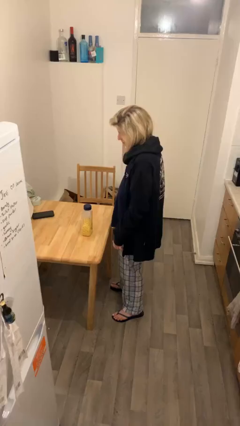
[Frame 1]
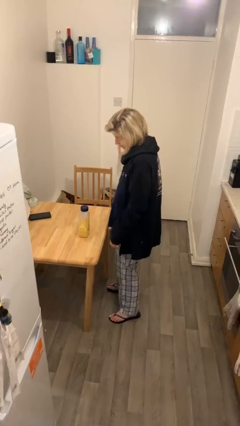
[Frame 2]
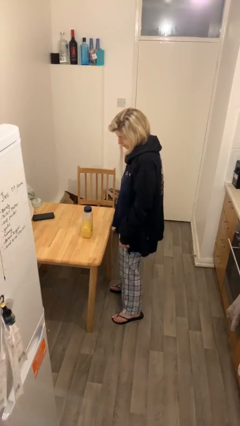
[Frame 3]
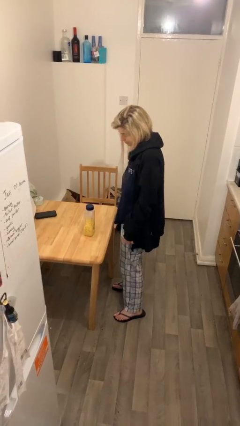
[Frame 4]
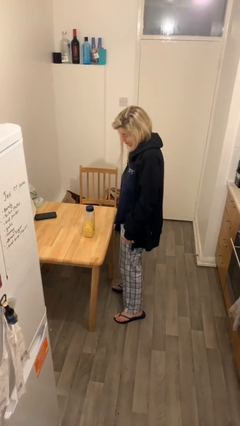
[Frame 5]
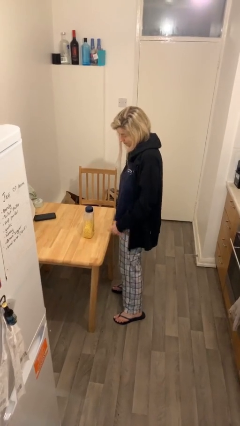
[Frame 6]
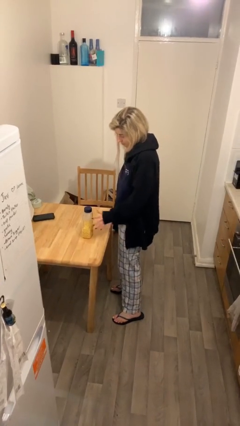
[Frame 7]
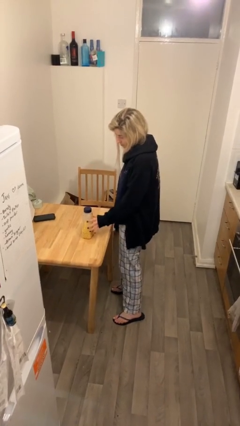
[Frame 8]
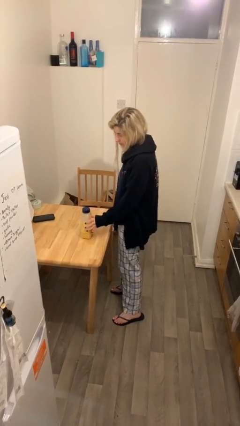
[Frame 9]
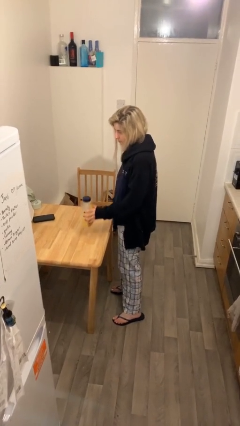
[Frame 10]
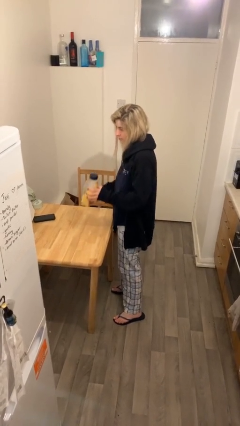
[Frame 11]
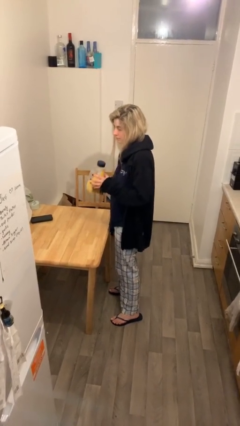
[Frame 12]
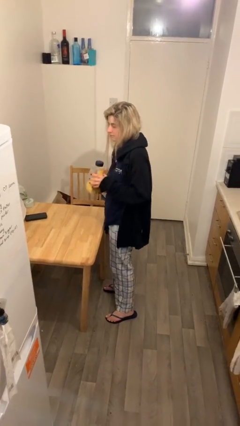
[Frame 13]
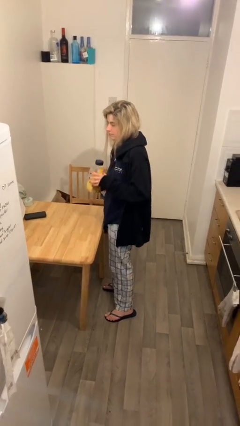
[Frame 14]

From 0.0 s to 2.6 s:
person picks up object from table

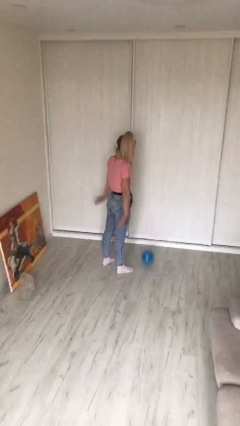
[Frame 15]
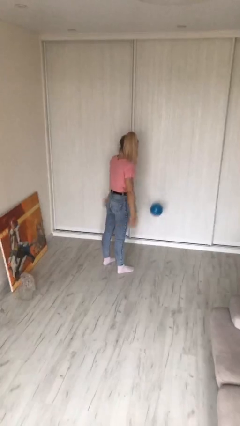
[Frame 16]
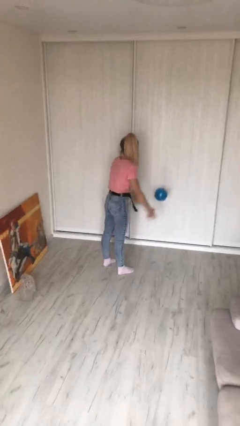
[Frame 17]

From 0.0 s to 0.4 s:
person bounces ball on floor

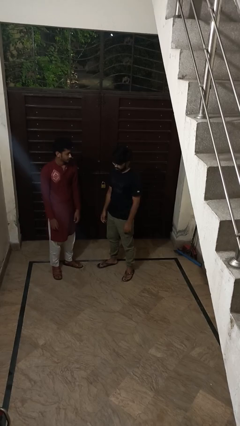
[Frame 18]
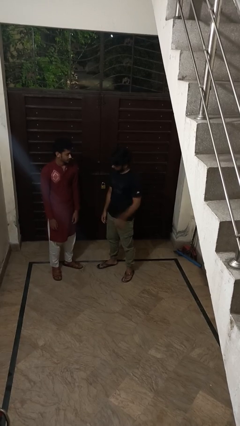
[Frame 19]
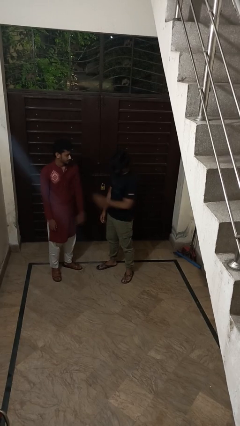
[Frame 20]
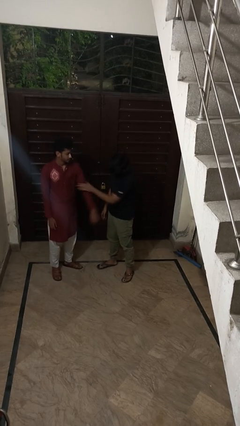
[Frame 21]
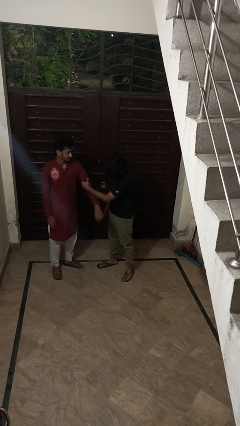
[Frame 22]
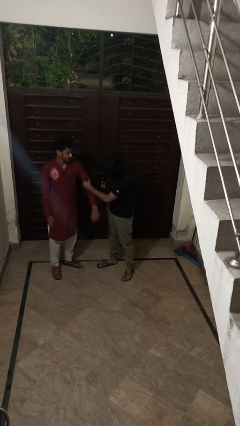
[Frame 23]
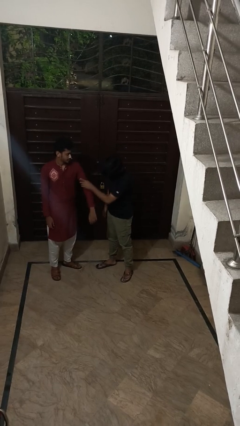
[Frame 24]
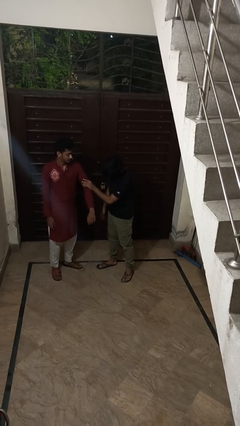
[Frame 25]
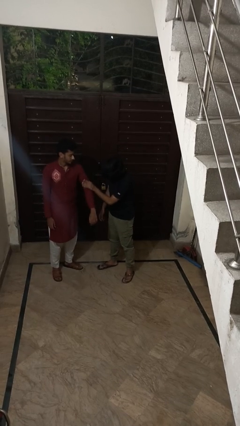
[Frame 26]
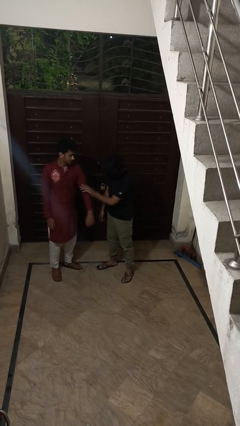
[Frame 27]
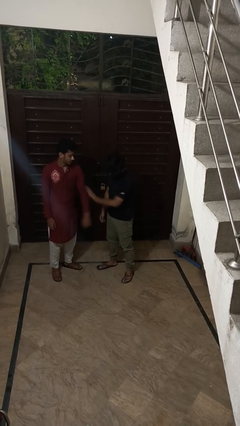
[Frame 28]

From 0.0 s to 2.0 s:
person grabs person by bicep

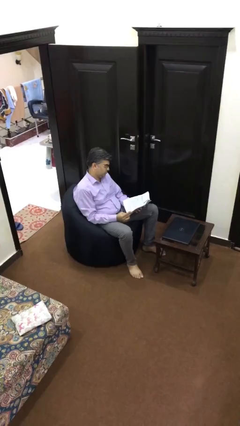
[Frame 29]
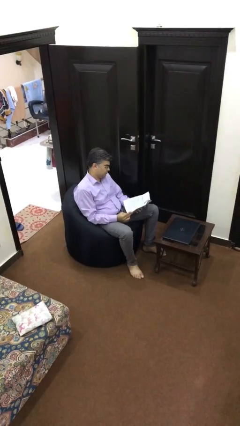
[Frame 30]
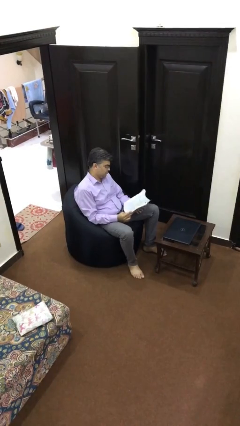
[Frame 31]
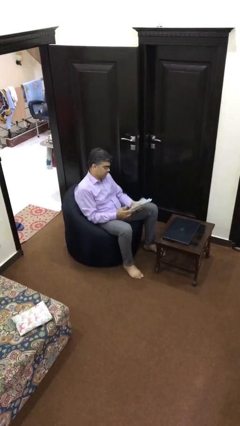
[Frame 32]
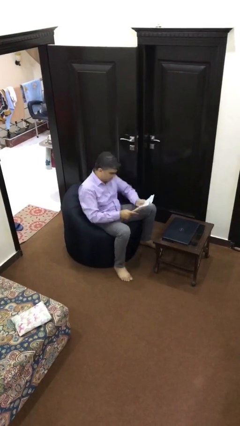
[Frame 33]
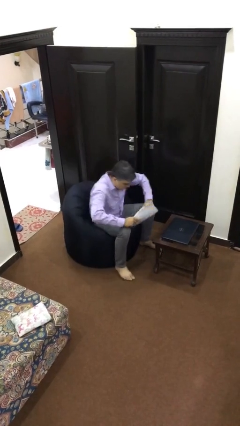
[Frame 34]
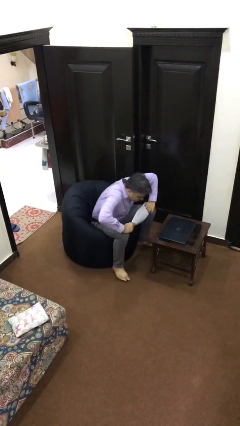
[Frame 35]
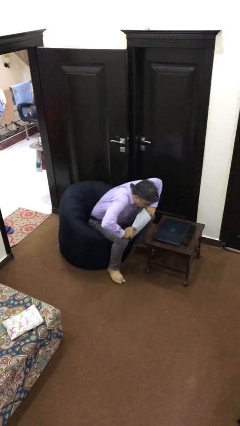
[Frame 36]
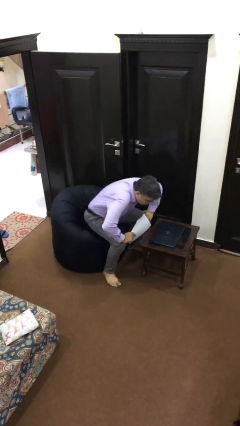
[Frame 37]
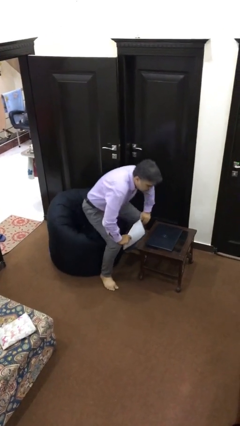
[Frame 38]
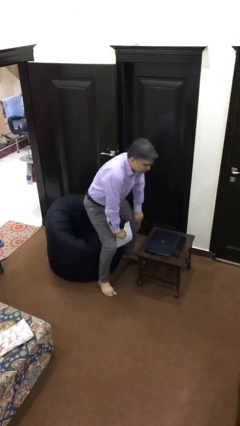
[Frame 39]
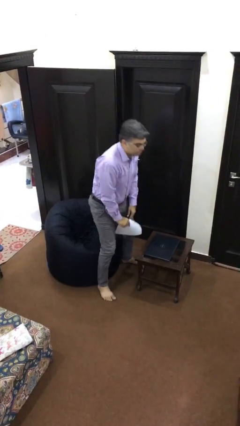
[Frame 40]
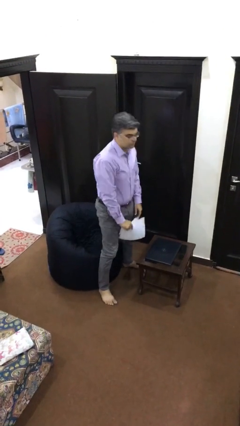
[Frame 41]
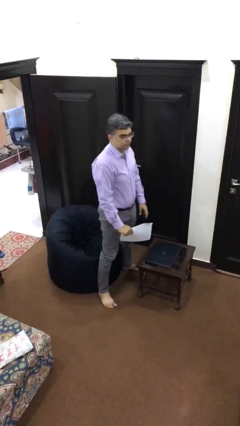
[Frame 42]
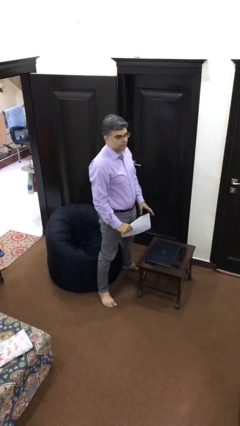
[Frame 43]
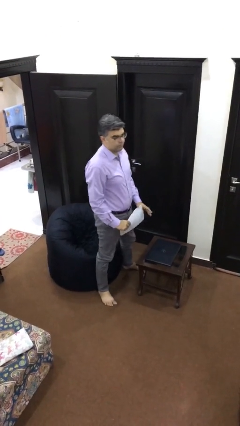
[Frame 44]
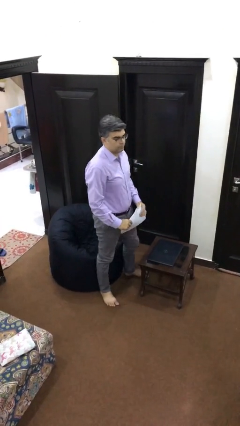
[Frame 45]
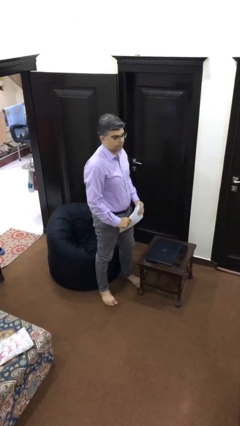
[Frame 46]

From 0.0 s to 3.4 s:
person stands up

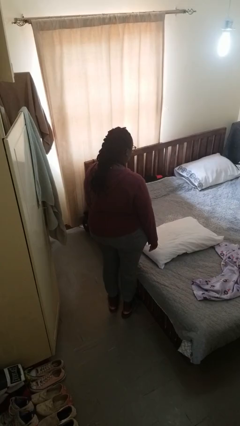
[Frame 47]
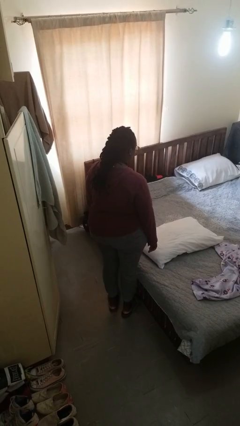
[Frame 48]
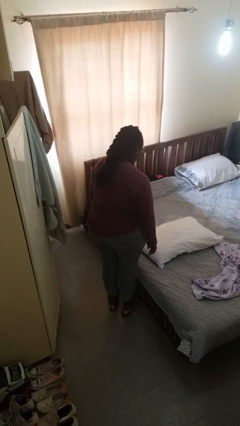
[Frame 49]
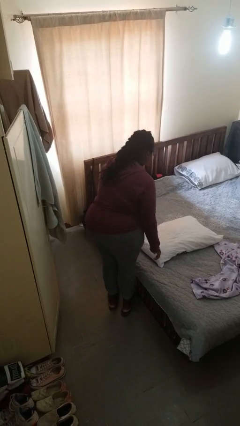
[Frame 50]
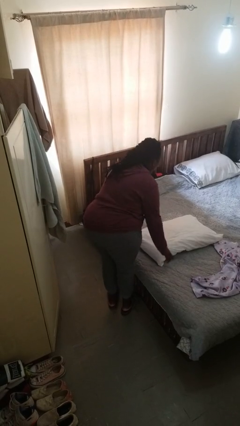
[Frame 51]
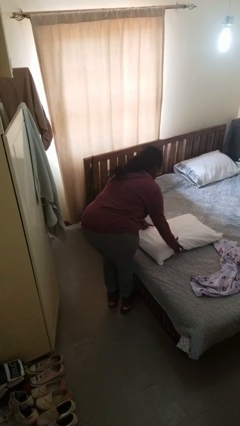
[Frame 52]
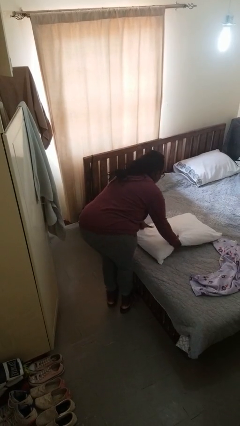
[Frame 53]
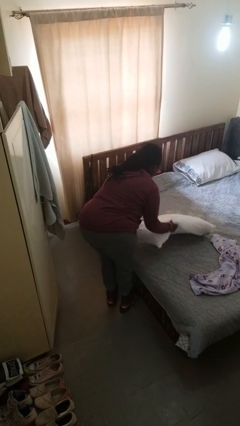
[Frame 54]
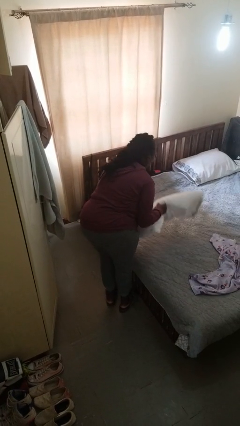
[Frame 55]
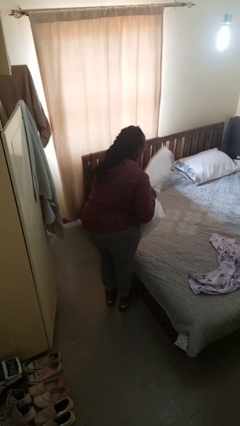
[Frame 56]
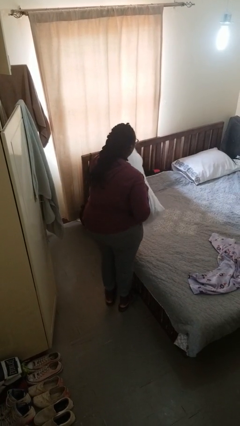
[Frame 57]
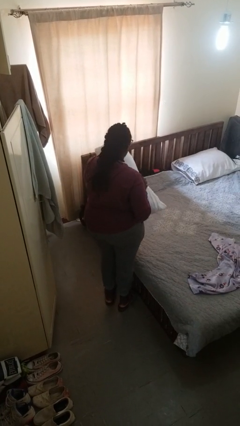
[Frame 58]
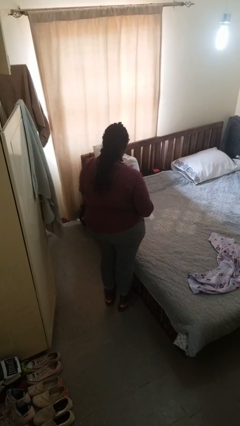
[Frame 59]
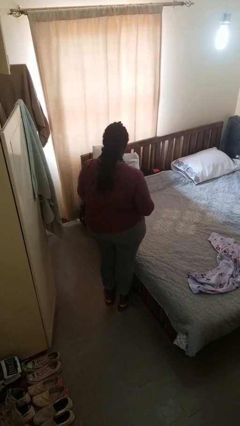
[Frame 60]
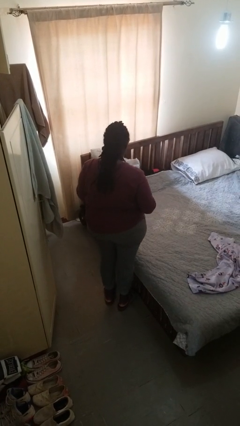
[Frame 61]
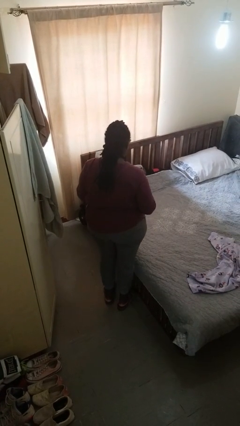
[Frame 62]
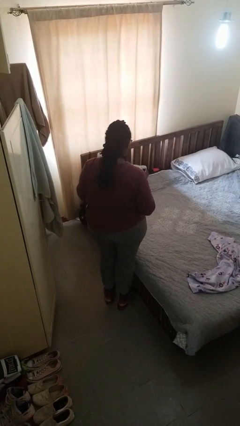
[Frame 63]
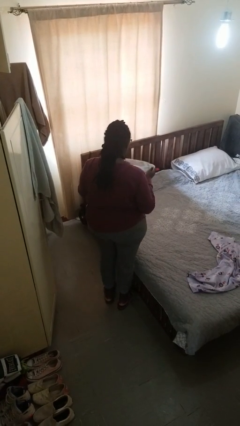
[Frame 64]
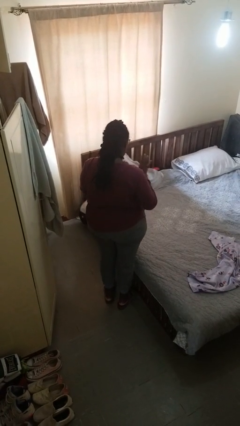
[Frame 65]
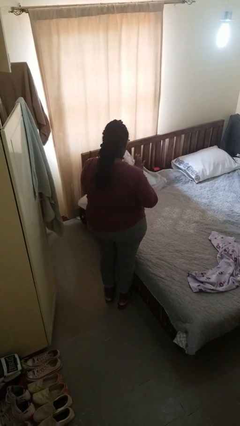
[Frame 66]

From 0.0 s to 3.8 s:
person picks up object from bed

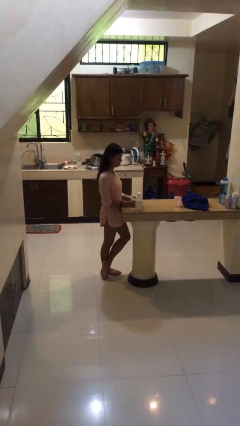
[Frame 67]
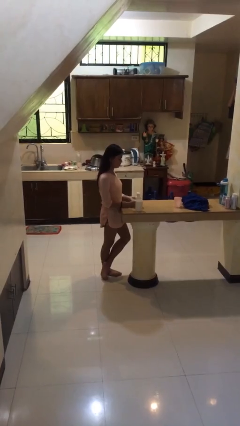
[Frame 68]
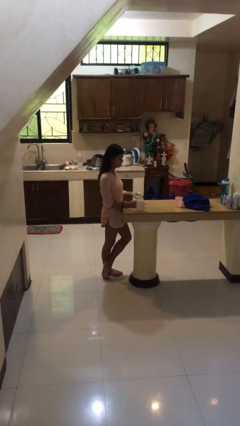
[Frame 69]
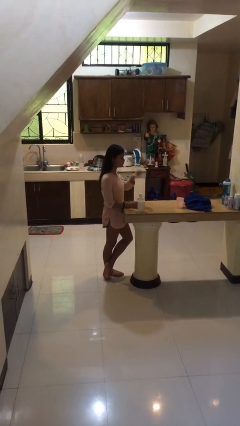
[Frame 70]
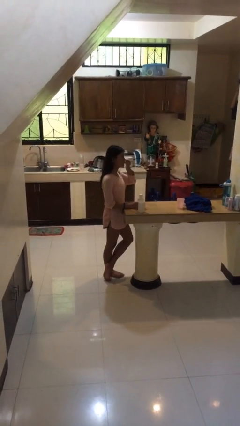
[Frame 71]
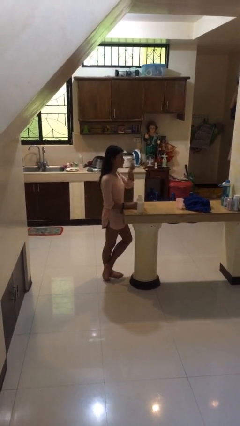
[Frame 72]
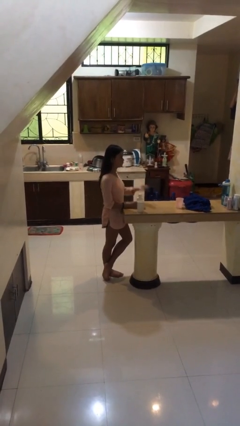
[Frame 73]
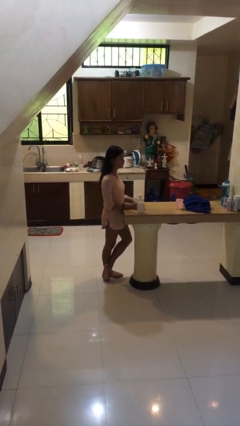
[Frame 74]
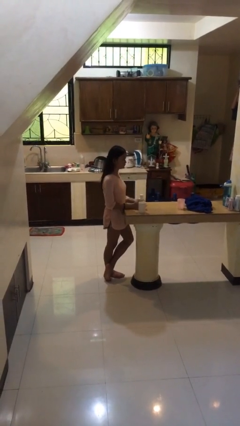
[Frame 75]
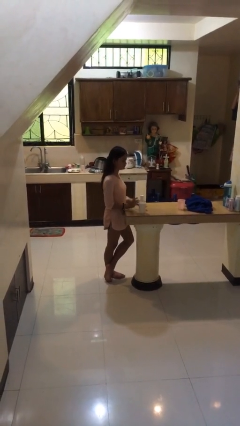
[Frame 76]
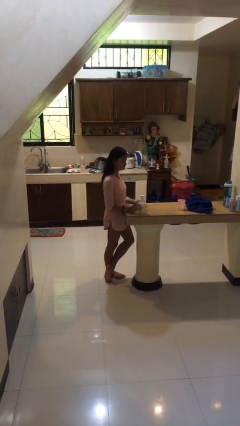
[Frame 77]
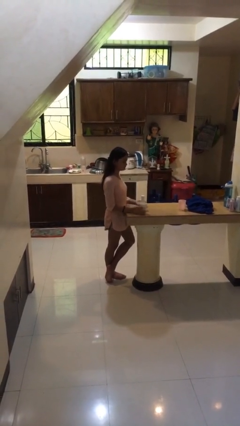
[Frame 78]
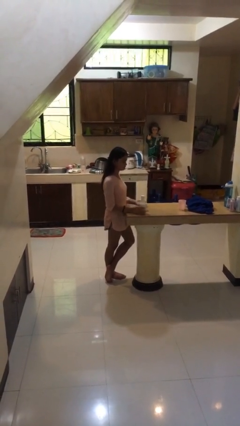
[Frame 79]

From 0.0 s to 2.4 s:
person takes medicine pills

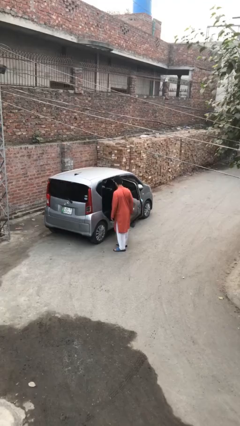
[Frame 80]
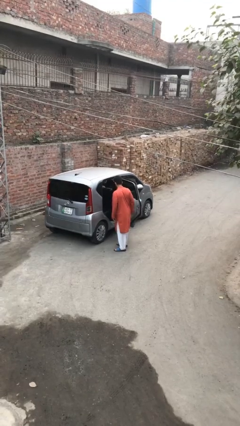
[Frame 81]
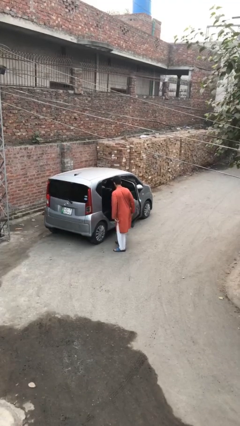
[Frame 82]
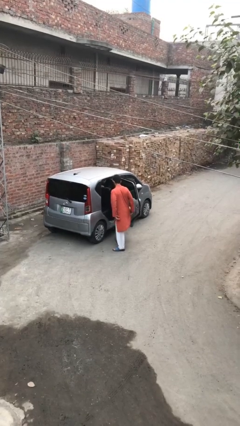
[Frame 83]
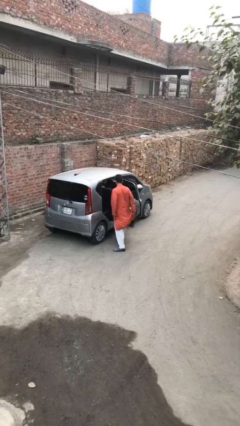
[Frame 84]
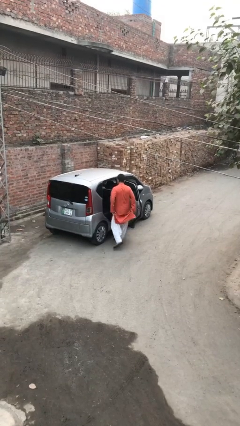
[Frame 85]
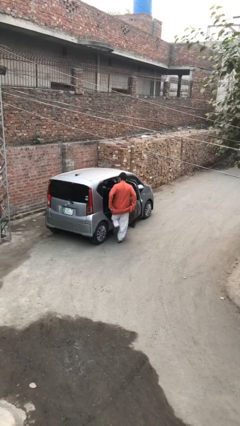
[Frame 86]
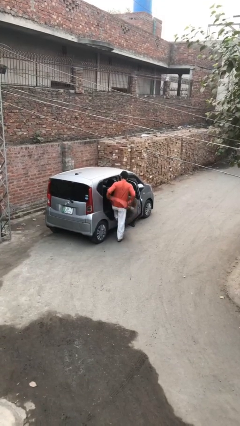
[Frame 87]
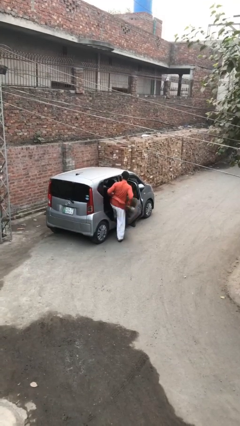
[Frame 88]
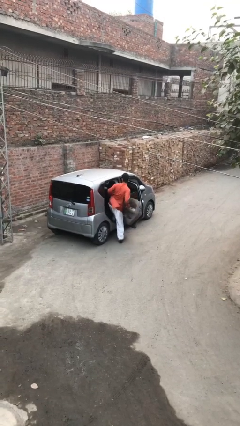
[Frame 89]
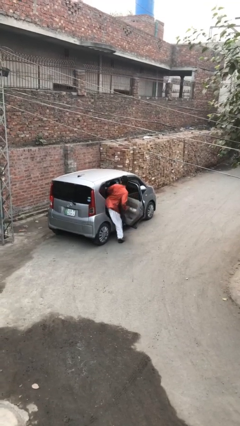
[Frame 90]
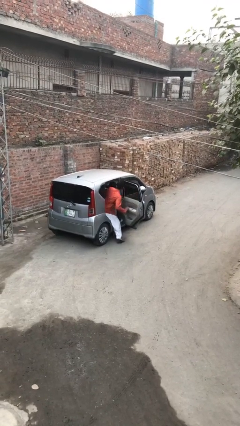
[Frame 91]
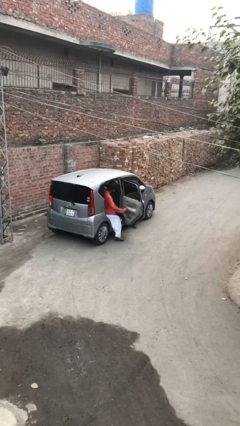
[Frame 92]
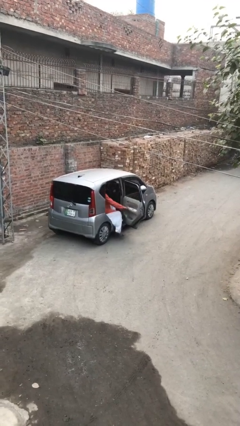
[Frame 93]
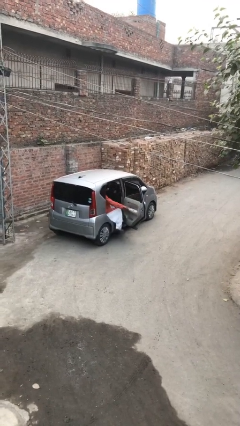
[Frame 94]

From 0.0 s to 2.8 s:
person enters car
